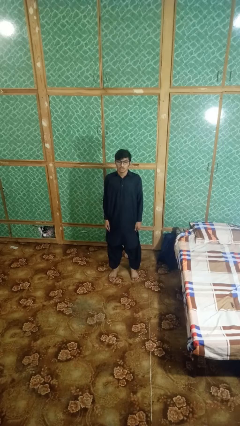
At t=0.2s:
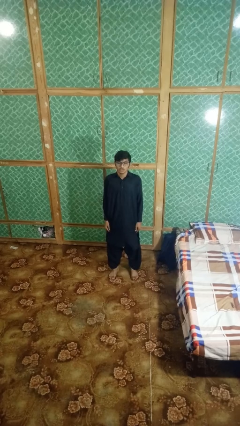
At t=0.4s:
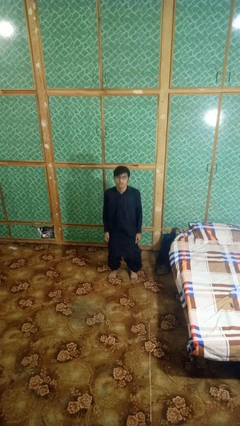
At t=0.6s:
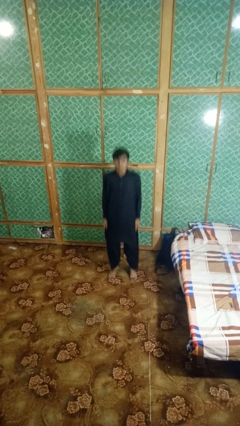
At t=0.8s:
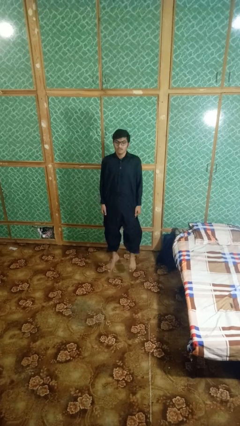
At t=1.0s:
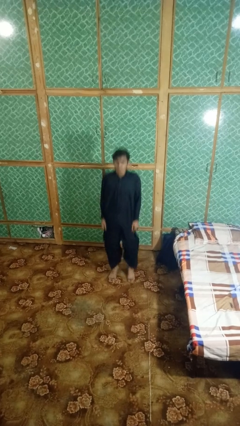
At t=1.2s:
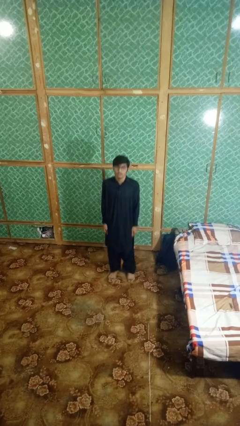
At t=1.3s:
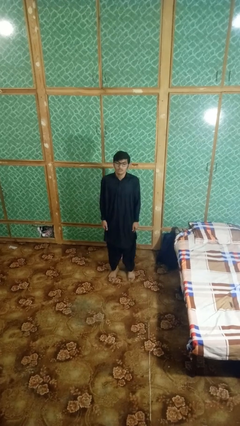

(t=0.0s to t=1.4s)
person jumps

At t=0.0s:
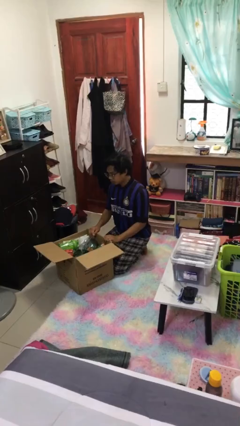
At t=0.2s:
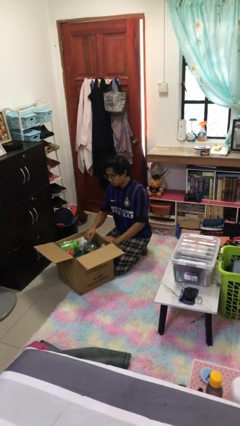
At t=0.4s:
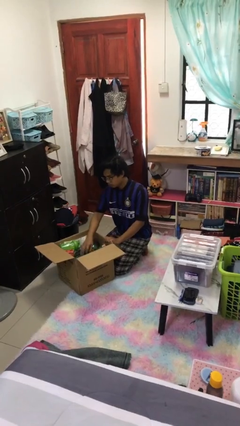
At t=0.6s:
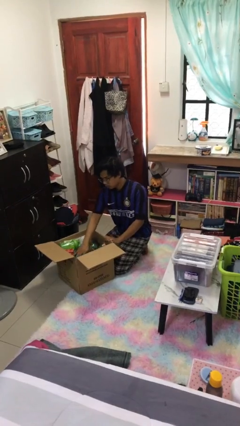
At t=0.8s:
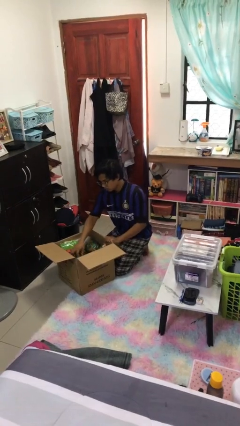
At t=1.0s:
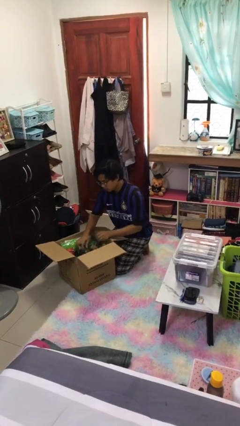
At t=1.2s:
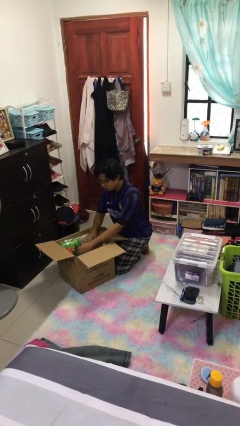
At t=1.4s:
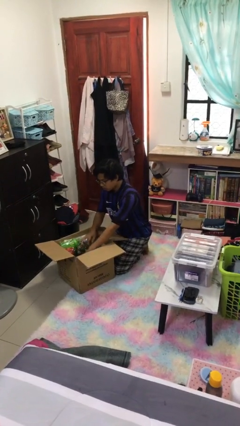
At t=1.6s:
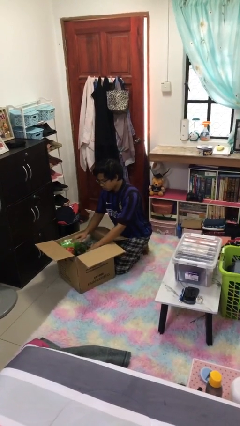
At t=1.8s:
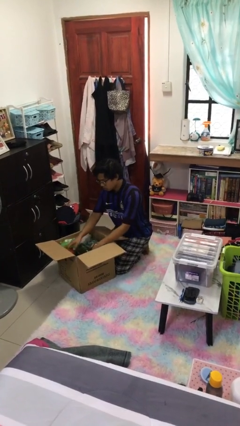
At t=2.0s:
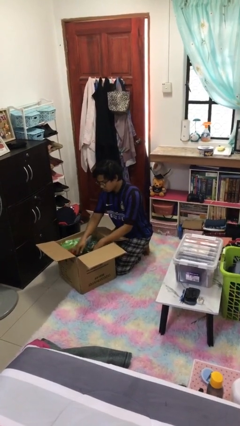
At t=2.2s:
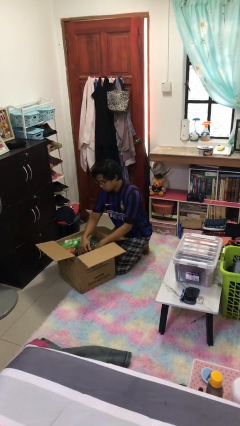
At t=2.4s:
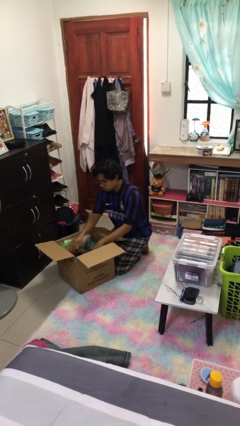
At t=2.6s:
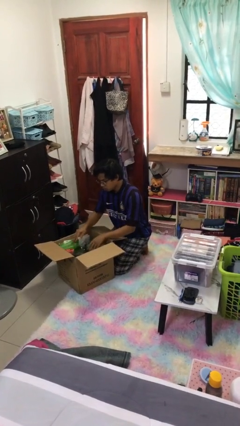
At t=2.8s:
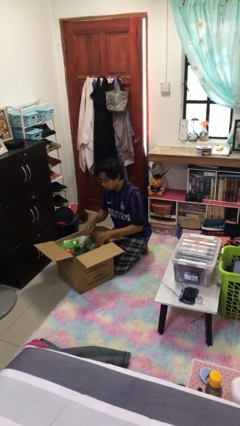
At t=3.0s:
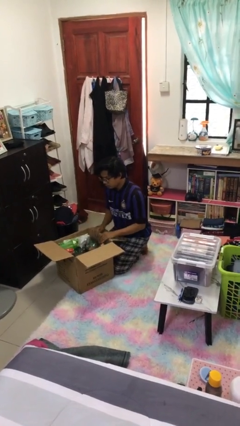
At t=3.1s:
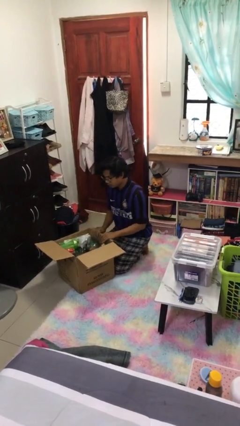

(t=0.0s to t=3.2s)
person searches in box

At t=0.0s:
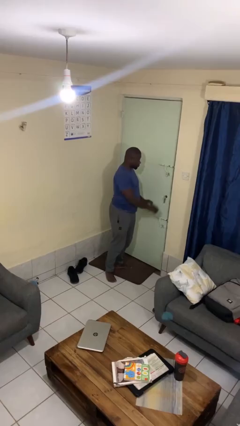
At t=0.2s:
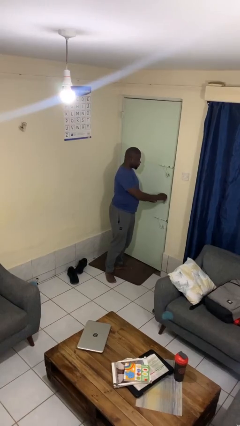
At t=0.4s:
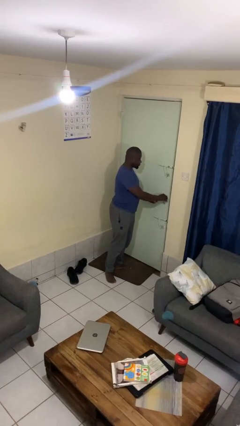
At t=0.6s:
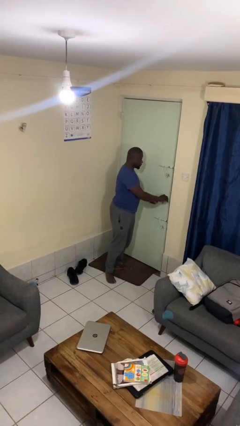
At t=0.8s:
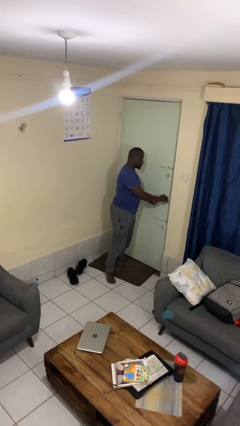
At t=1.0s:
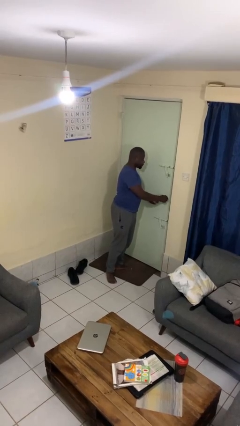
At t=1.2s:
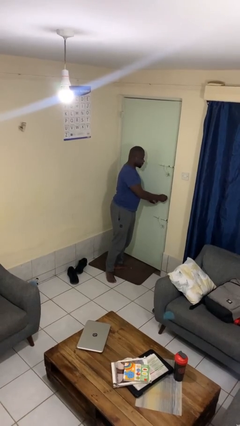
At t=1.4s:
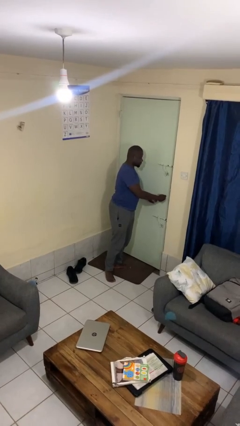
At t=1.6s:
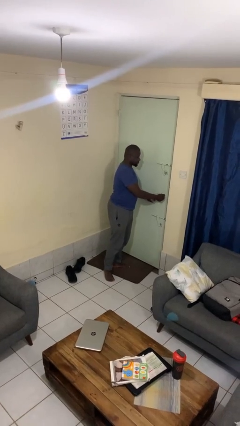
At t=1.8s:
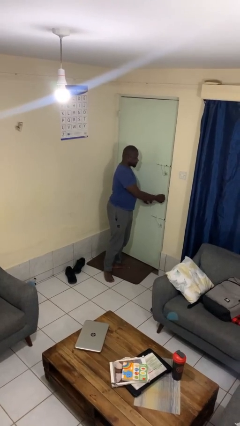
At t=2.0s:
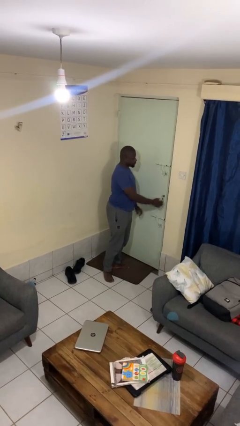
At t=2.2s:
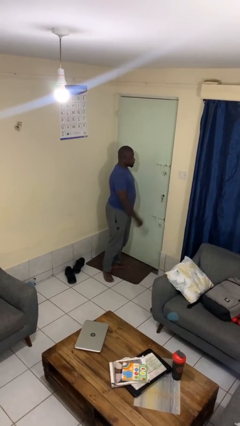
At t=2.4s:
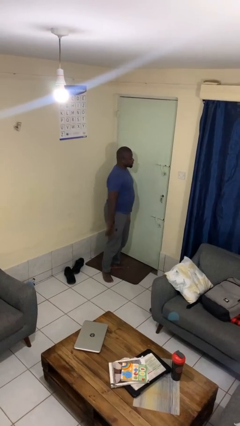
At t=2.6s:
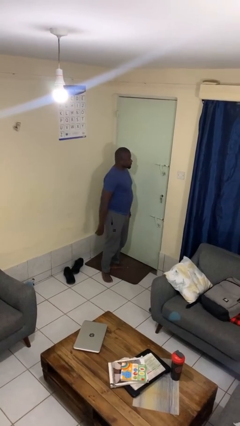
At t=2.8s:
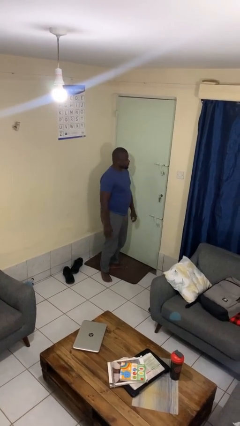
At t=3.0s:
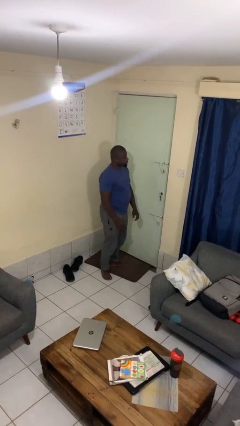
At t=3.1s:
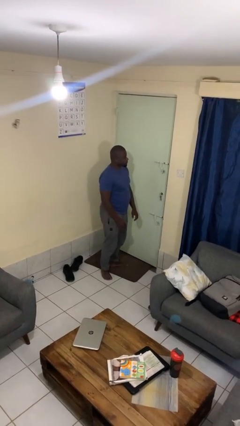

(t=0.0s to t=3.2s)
person locks door with keys

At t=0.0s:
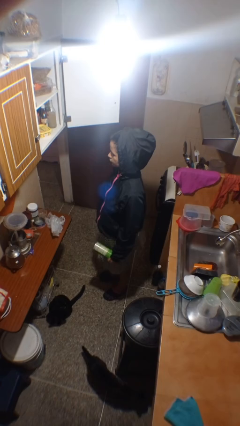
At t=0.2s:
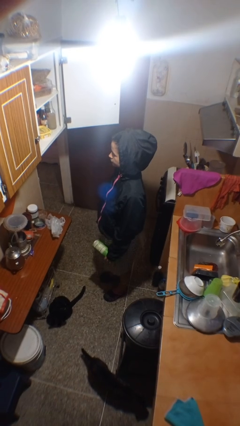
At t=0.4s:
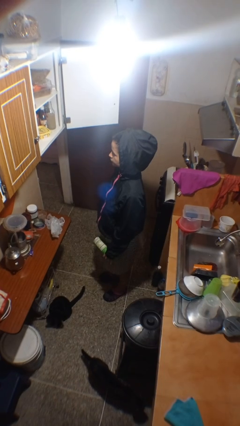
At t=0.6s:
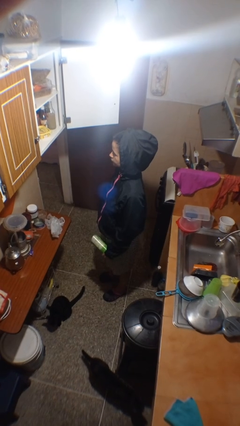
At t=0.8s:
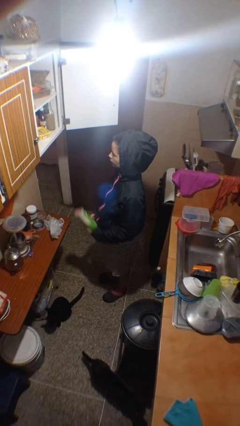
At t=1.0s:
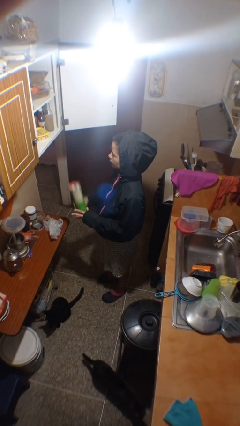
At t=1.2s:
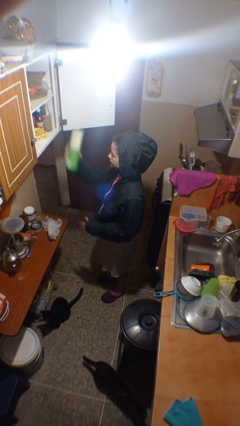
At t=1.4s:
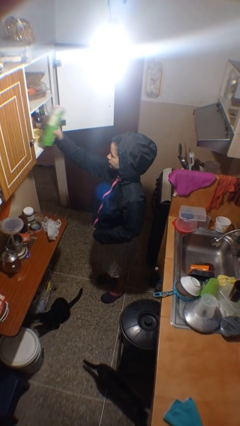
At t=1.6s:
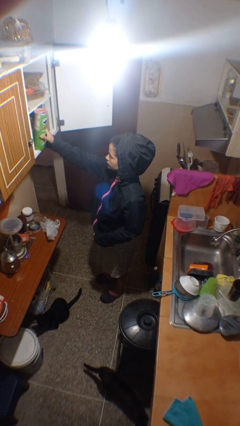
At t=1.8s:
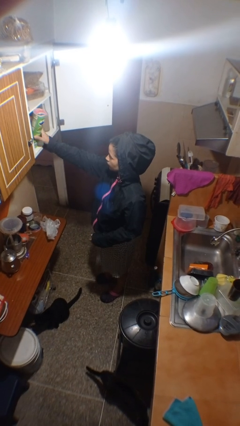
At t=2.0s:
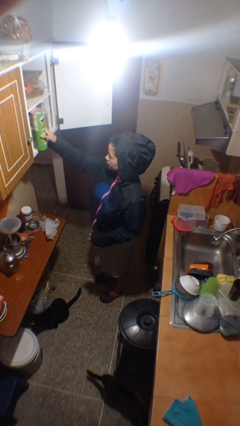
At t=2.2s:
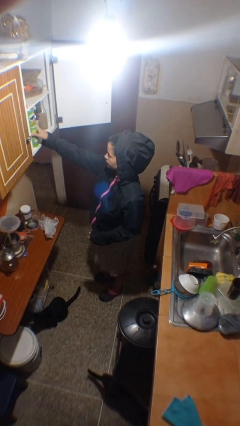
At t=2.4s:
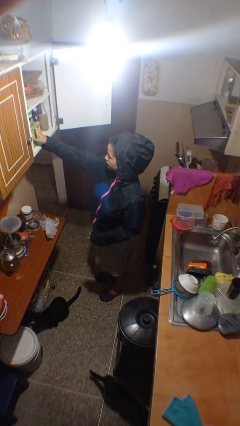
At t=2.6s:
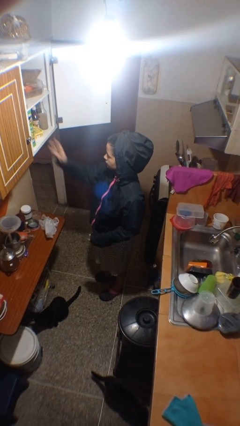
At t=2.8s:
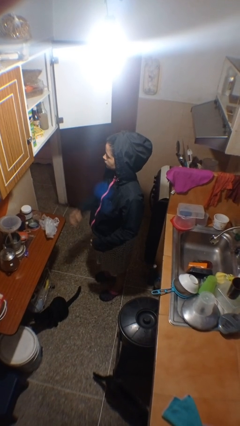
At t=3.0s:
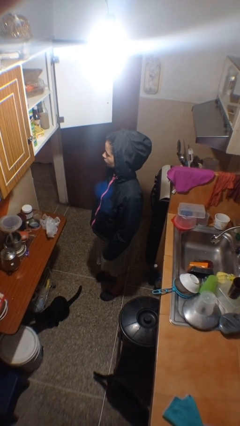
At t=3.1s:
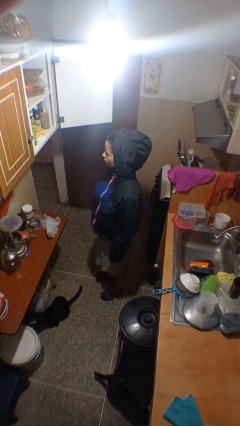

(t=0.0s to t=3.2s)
person puts object in cabinet

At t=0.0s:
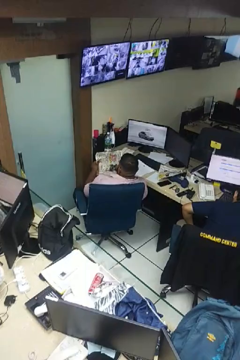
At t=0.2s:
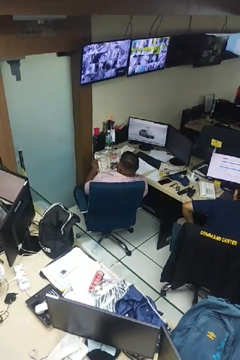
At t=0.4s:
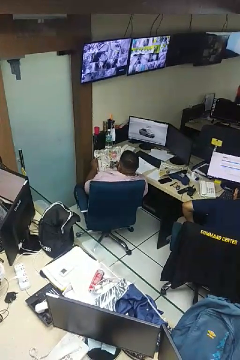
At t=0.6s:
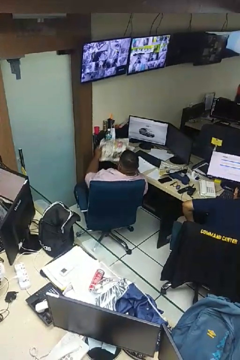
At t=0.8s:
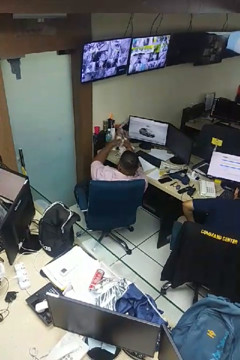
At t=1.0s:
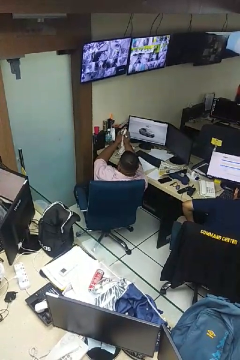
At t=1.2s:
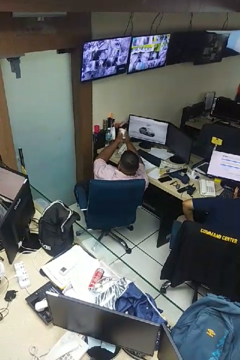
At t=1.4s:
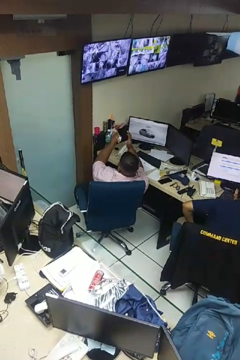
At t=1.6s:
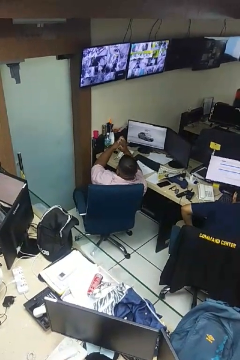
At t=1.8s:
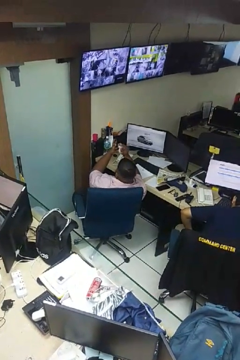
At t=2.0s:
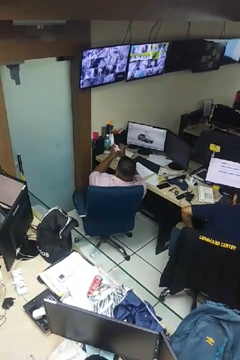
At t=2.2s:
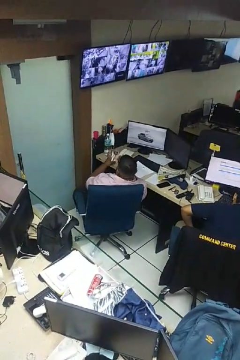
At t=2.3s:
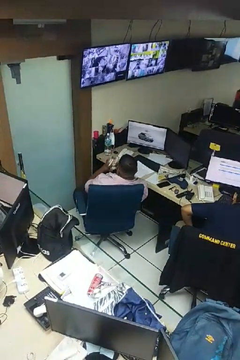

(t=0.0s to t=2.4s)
person crumples paper

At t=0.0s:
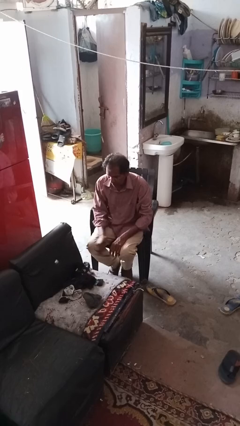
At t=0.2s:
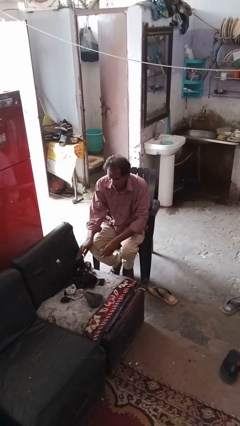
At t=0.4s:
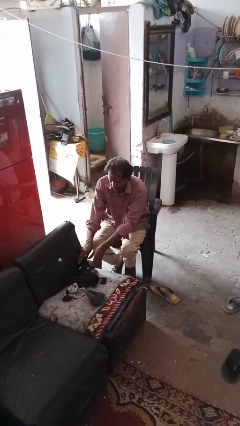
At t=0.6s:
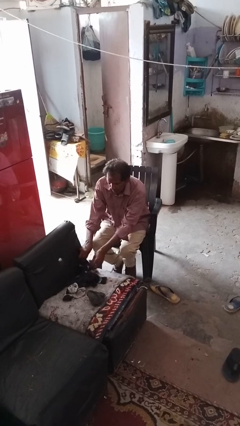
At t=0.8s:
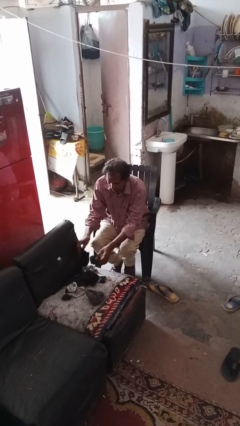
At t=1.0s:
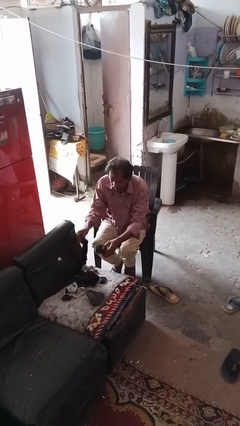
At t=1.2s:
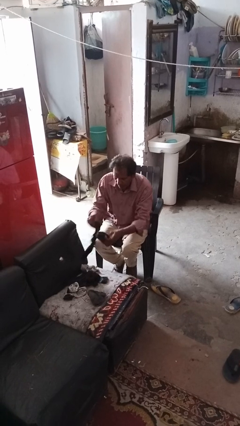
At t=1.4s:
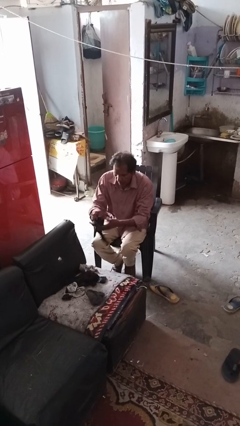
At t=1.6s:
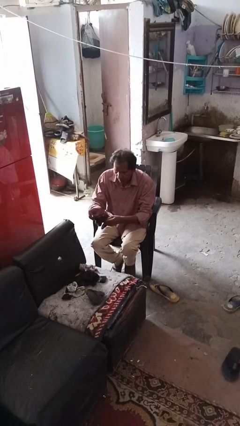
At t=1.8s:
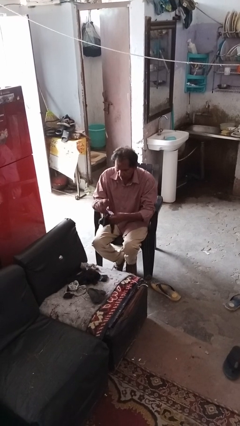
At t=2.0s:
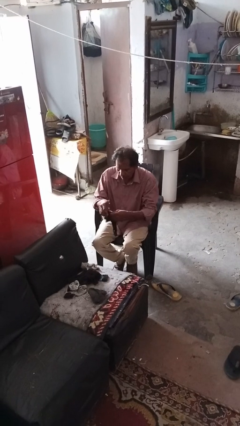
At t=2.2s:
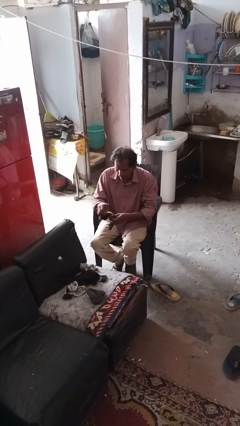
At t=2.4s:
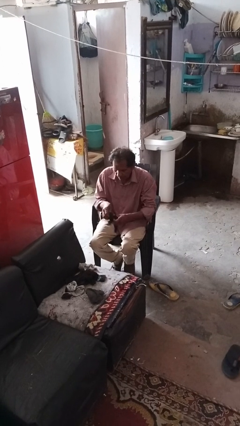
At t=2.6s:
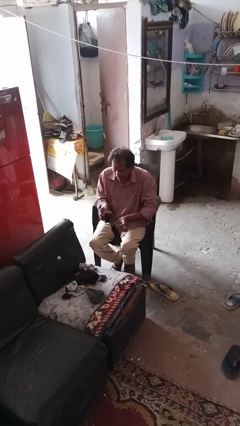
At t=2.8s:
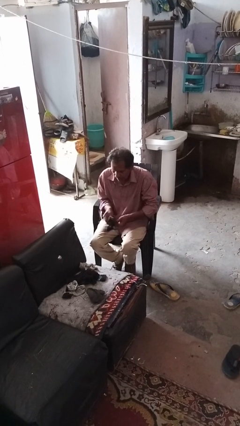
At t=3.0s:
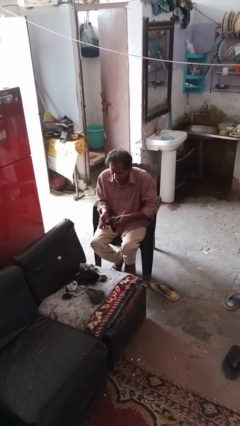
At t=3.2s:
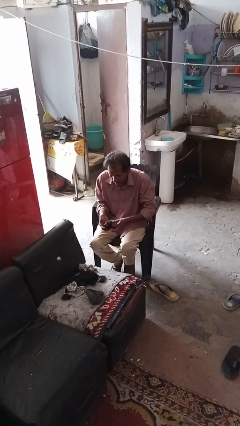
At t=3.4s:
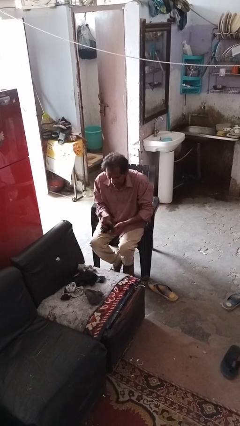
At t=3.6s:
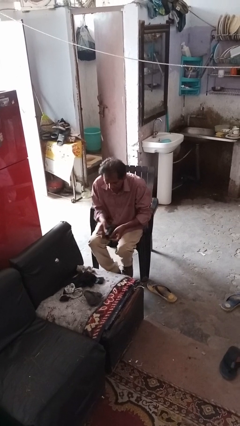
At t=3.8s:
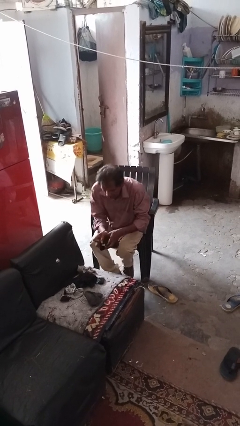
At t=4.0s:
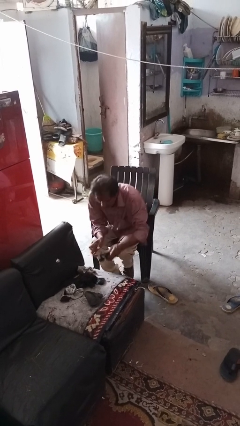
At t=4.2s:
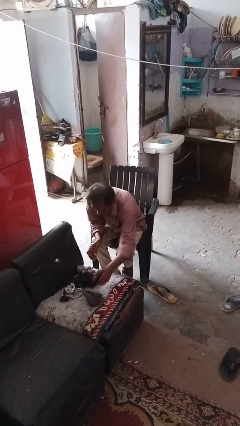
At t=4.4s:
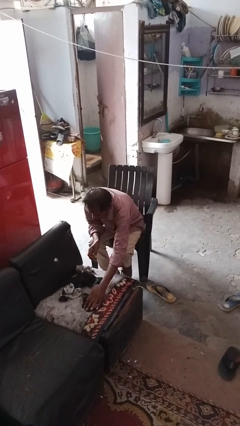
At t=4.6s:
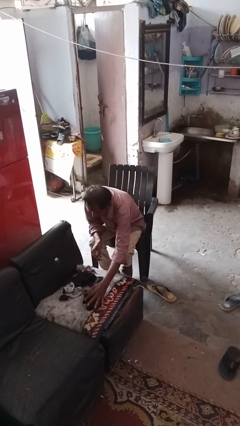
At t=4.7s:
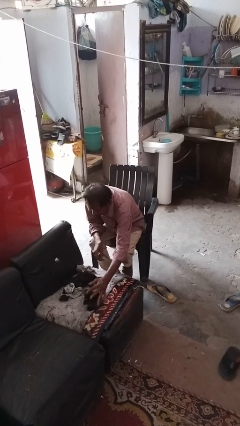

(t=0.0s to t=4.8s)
person folds socks
